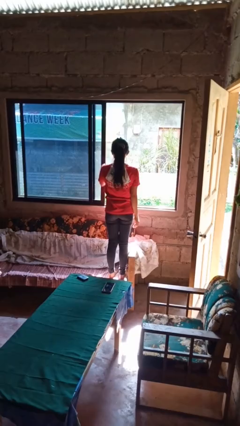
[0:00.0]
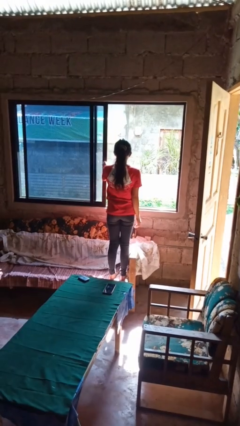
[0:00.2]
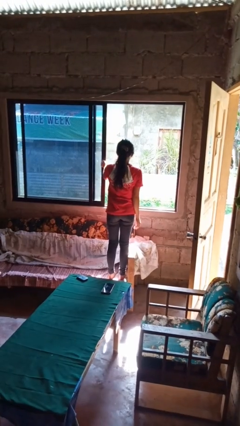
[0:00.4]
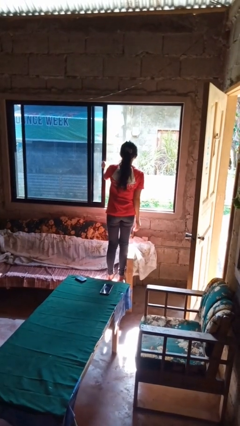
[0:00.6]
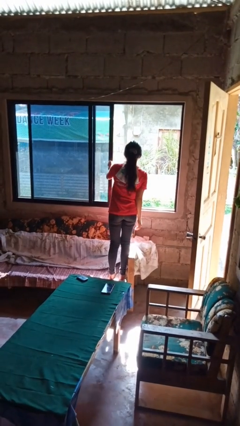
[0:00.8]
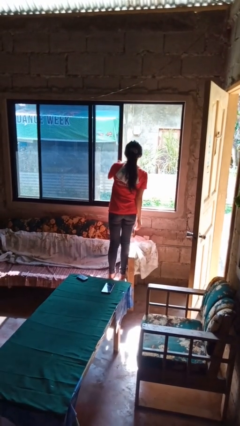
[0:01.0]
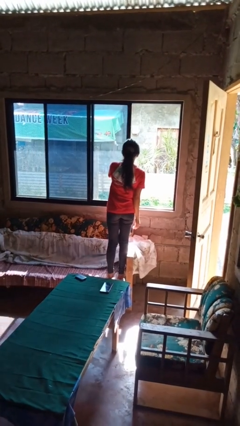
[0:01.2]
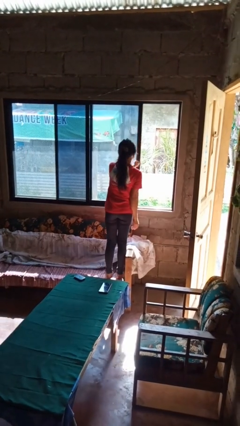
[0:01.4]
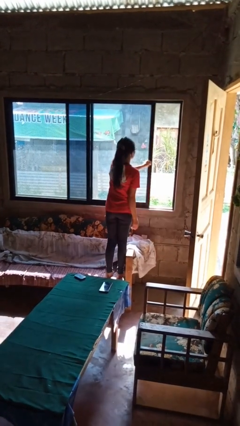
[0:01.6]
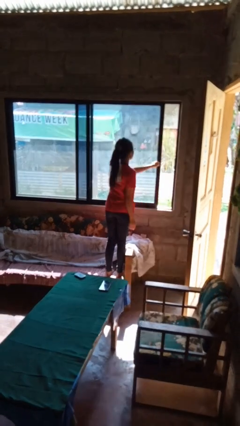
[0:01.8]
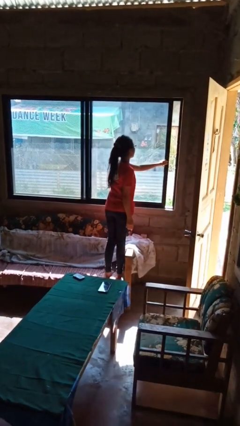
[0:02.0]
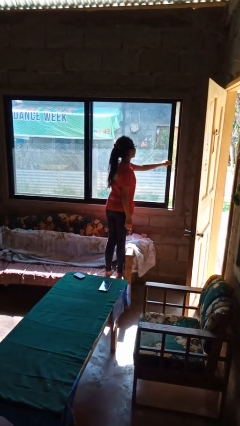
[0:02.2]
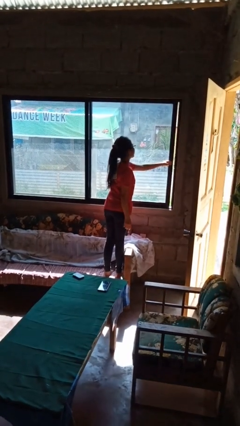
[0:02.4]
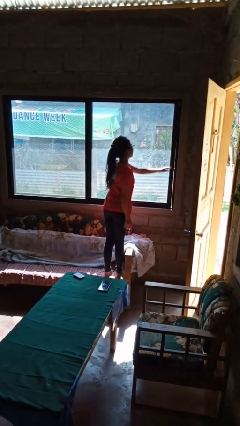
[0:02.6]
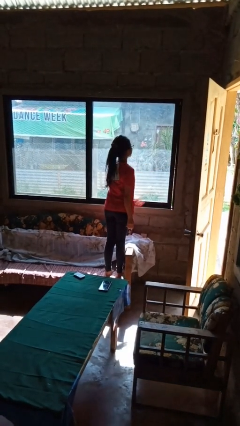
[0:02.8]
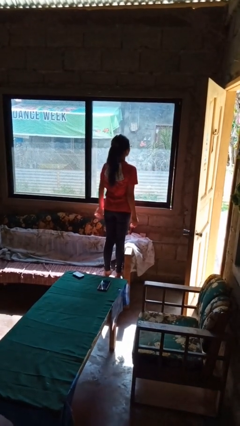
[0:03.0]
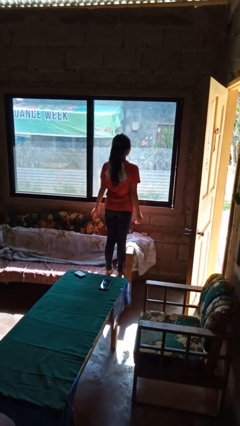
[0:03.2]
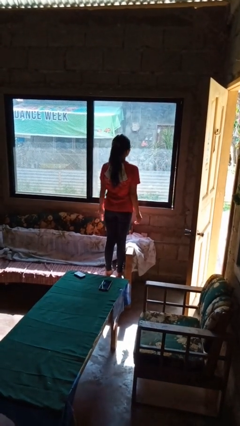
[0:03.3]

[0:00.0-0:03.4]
person closes home window

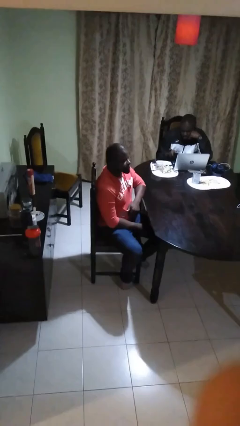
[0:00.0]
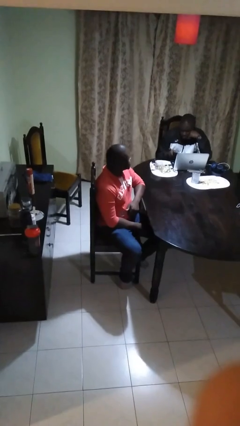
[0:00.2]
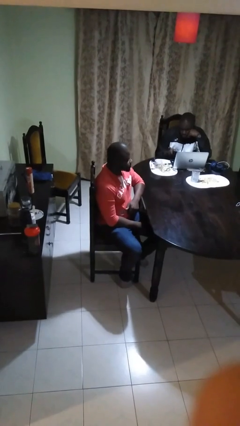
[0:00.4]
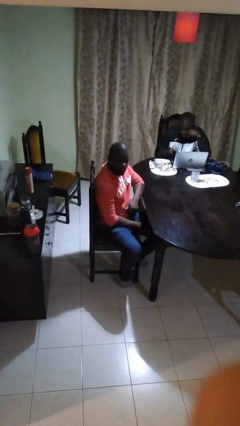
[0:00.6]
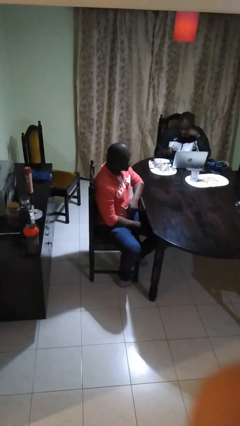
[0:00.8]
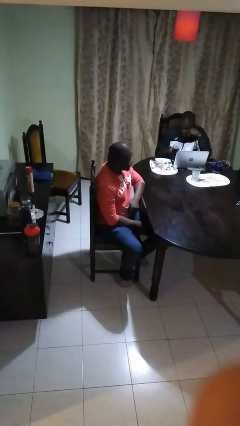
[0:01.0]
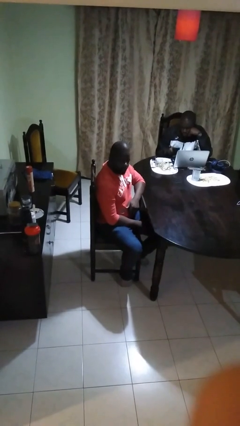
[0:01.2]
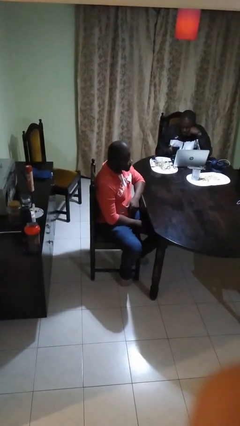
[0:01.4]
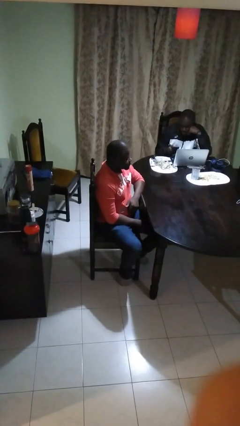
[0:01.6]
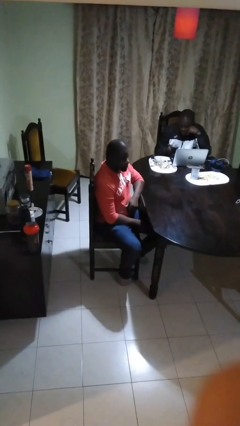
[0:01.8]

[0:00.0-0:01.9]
person shakes head

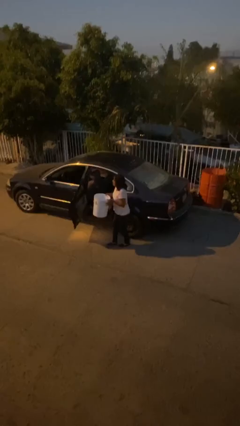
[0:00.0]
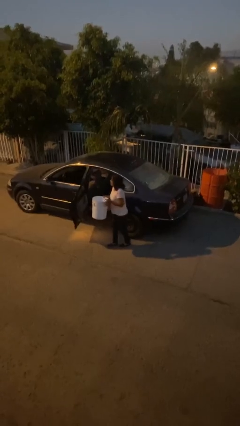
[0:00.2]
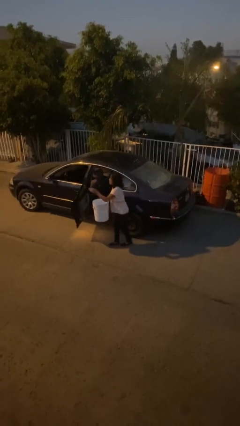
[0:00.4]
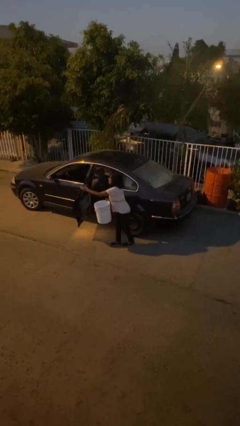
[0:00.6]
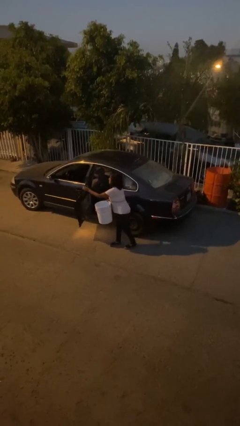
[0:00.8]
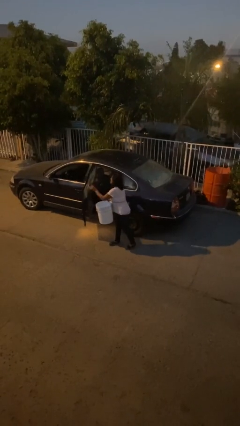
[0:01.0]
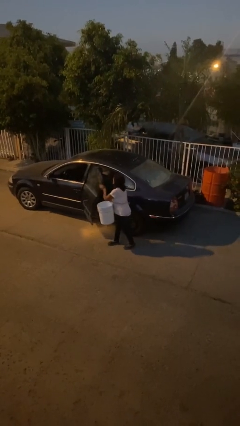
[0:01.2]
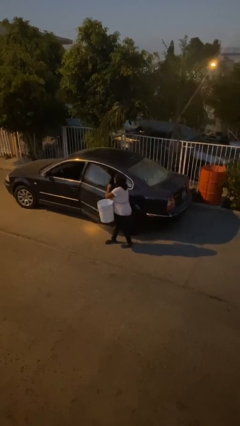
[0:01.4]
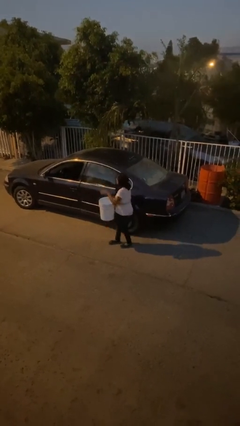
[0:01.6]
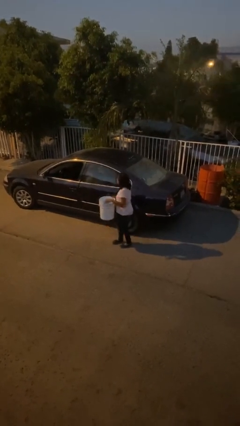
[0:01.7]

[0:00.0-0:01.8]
person closes car door

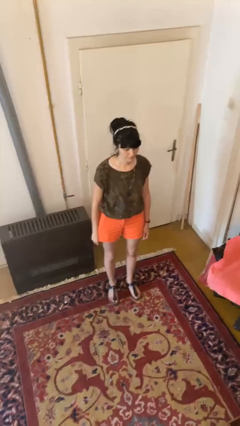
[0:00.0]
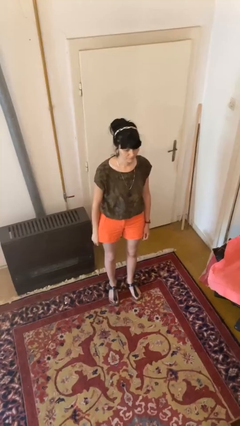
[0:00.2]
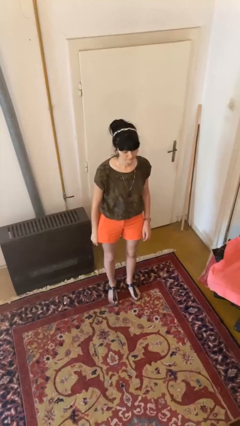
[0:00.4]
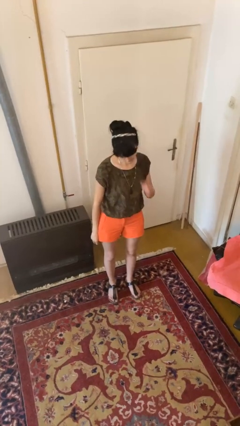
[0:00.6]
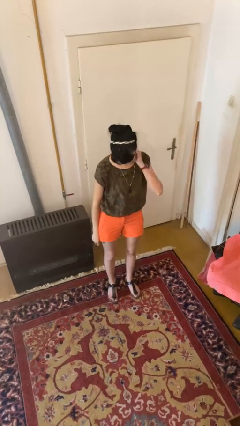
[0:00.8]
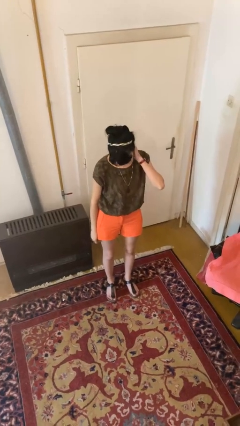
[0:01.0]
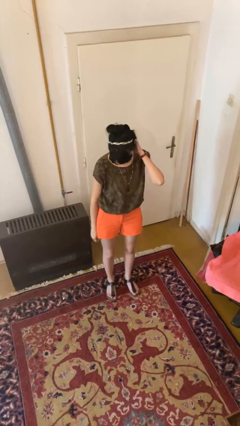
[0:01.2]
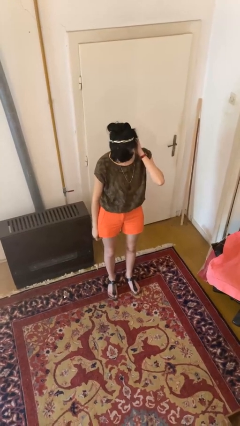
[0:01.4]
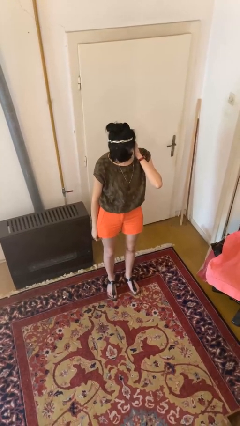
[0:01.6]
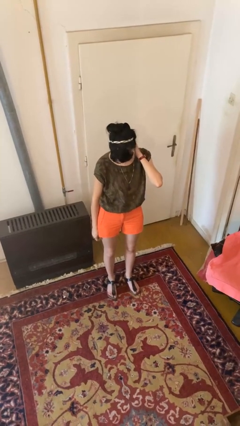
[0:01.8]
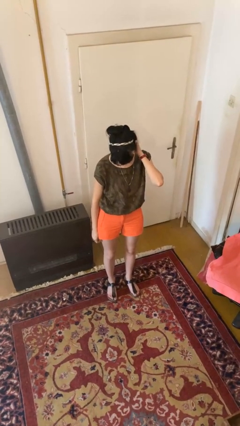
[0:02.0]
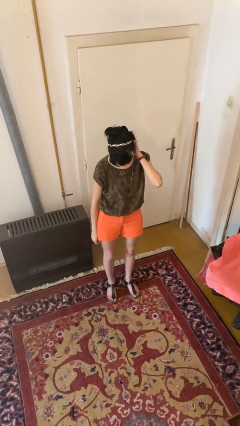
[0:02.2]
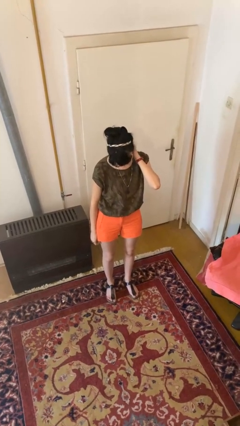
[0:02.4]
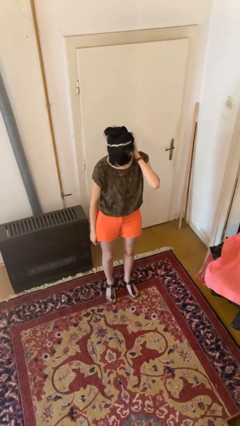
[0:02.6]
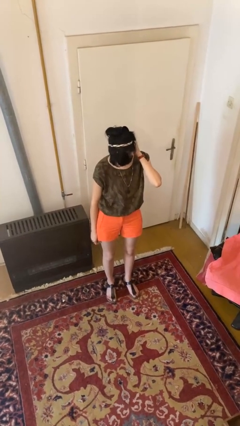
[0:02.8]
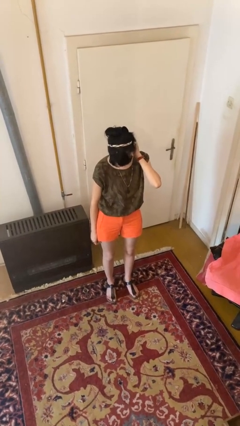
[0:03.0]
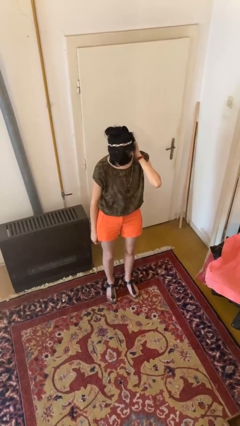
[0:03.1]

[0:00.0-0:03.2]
person scratches face

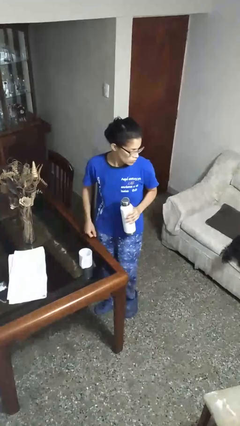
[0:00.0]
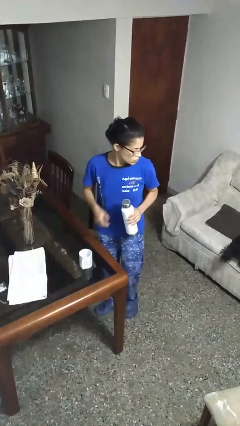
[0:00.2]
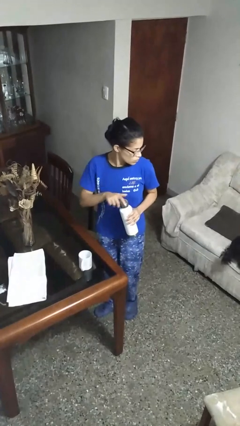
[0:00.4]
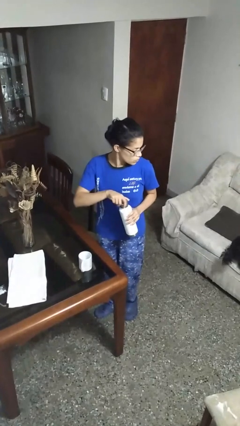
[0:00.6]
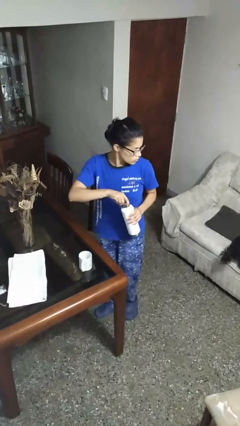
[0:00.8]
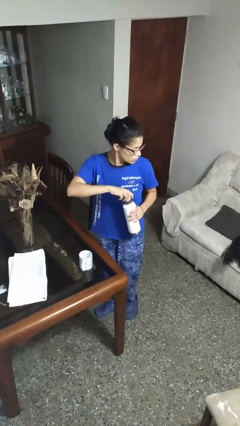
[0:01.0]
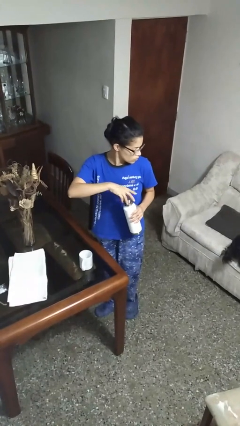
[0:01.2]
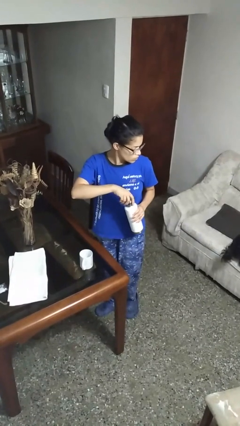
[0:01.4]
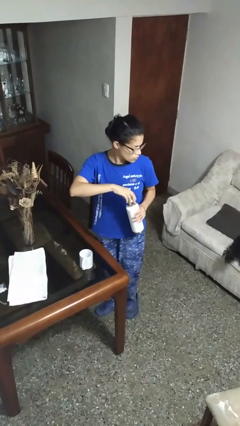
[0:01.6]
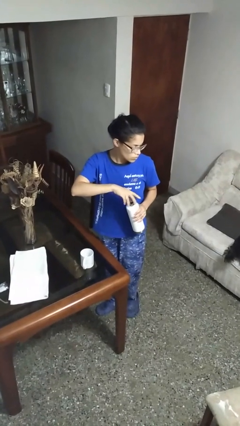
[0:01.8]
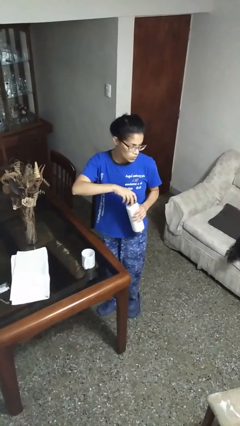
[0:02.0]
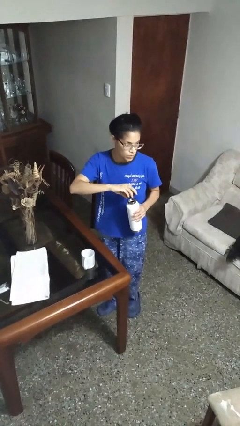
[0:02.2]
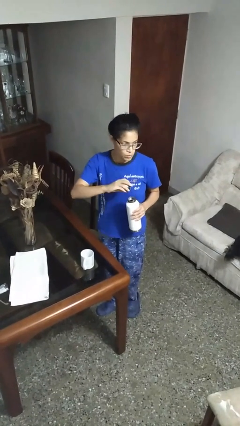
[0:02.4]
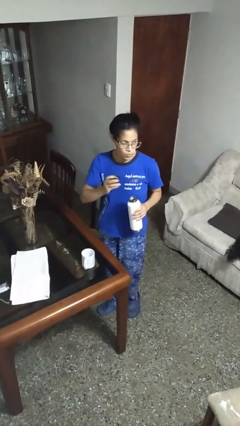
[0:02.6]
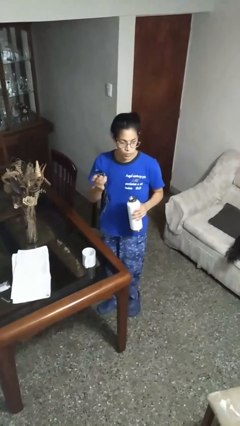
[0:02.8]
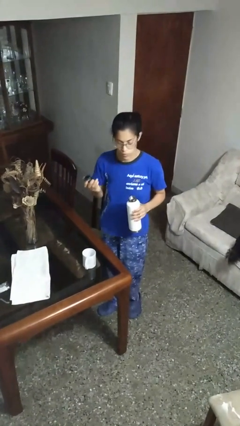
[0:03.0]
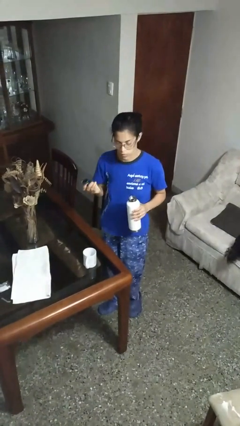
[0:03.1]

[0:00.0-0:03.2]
person unscrews lid from bottle

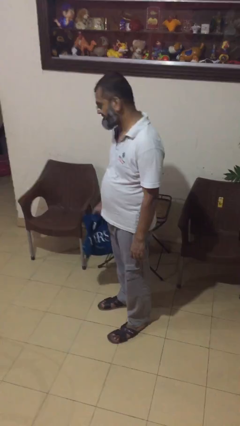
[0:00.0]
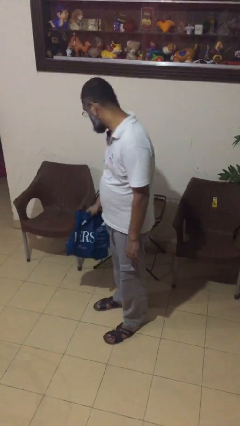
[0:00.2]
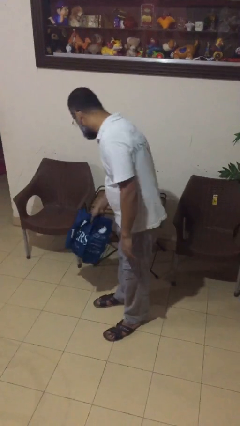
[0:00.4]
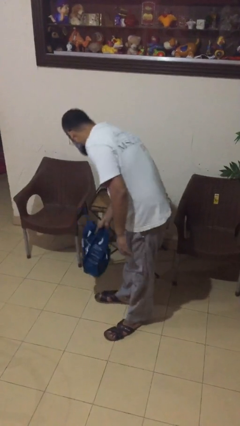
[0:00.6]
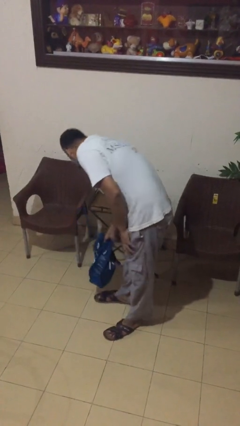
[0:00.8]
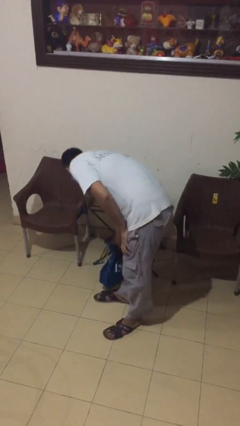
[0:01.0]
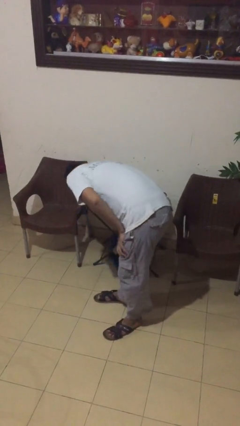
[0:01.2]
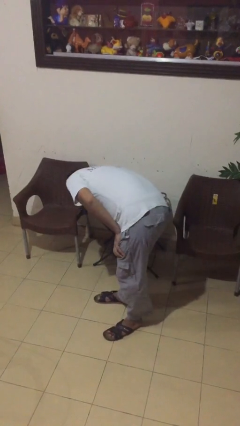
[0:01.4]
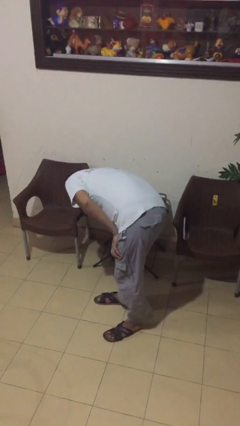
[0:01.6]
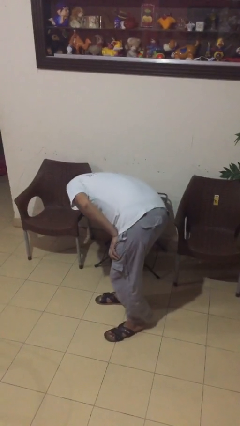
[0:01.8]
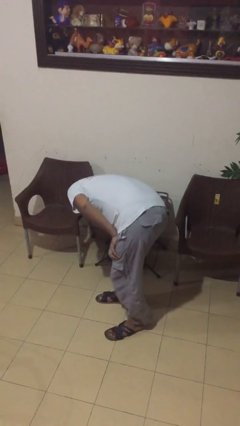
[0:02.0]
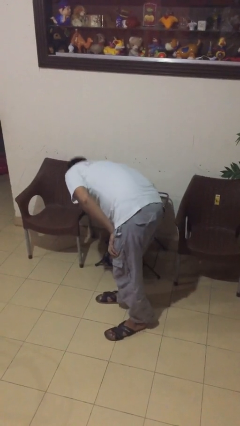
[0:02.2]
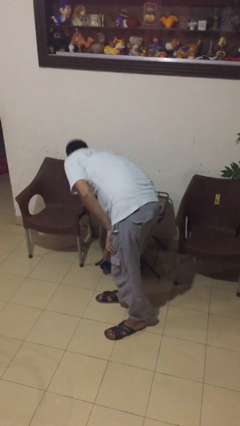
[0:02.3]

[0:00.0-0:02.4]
person puts down object on table

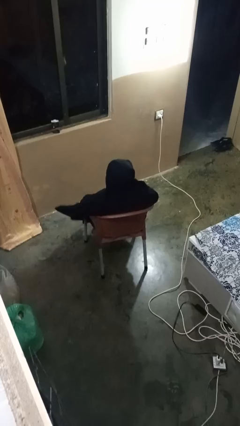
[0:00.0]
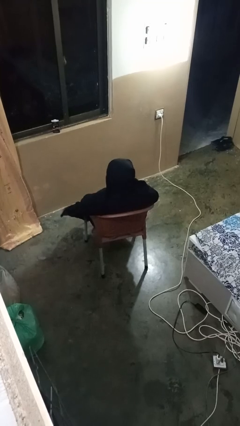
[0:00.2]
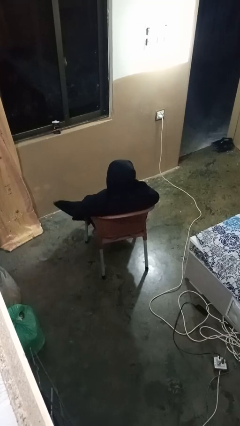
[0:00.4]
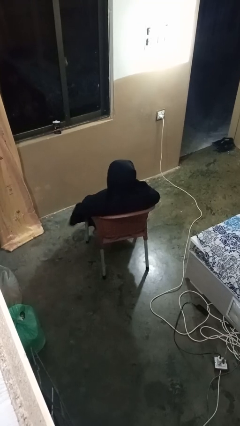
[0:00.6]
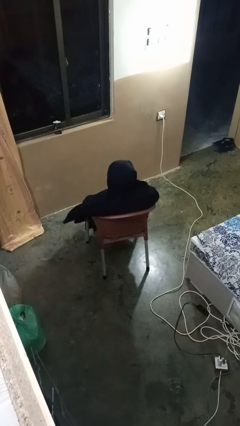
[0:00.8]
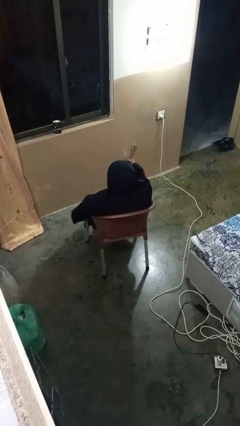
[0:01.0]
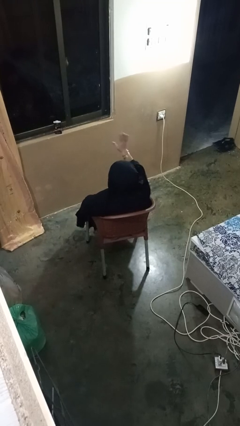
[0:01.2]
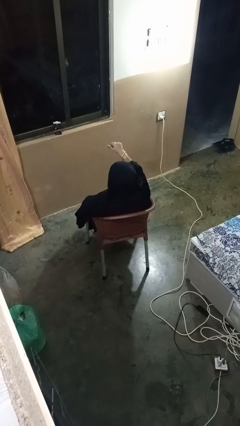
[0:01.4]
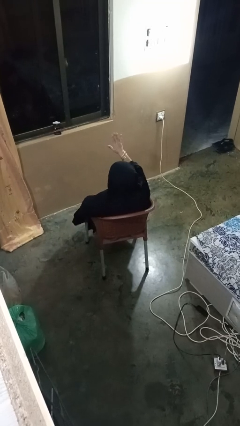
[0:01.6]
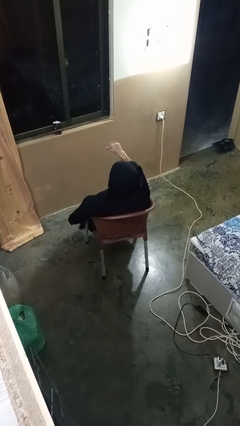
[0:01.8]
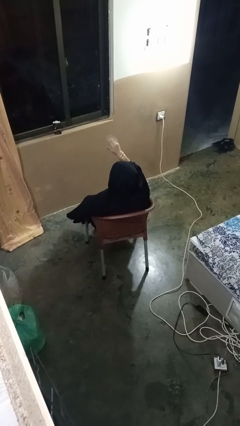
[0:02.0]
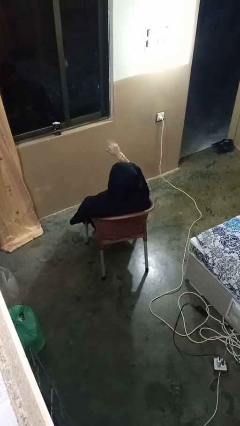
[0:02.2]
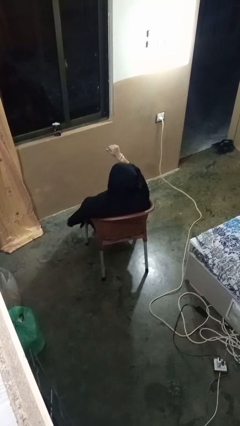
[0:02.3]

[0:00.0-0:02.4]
person gestures come here
